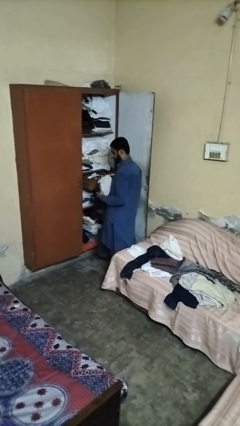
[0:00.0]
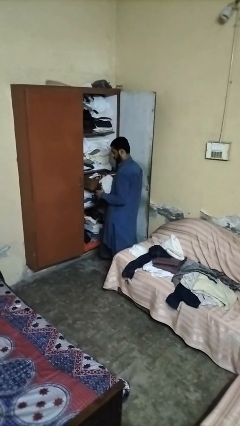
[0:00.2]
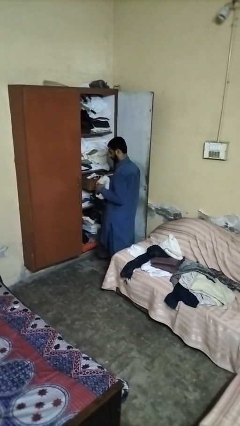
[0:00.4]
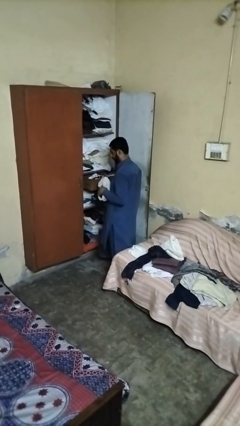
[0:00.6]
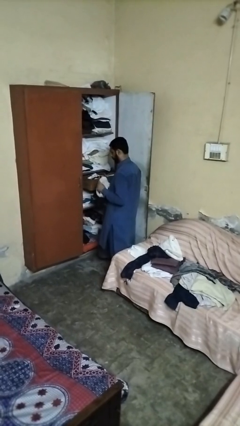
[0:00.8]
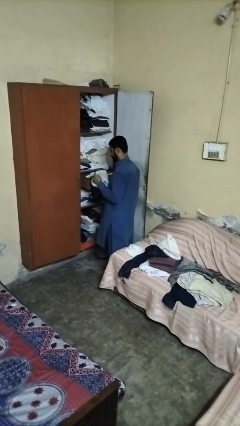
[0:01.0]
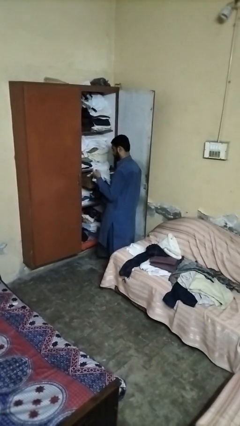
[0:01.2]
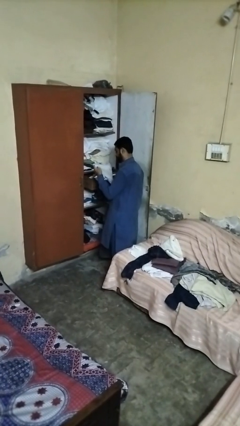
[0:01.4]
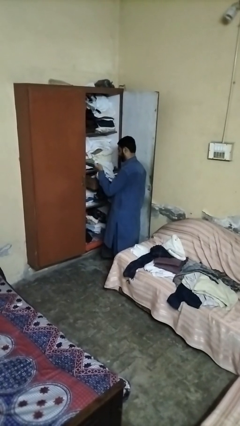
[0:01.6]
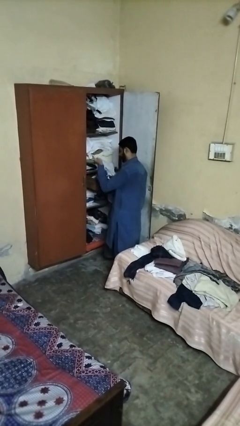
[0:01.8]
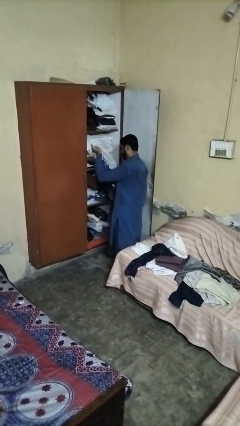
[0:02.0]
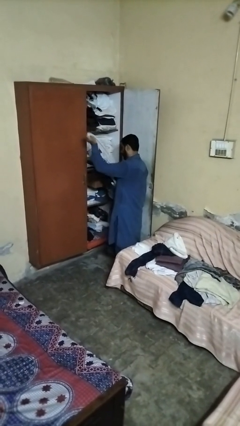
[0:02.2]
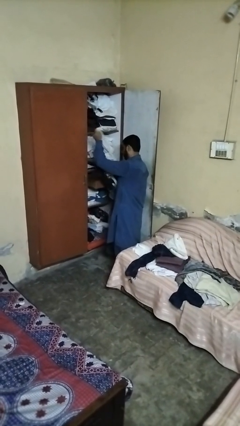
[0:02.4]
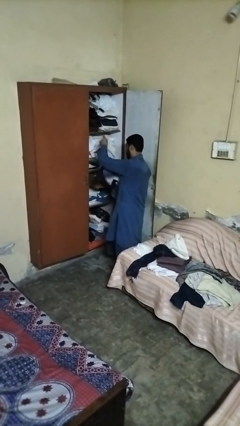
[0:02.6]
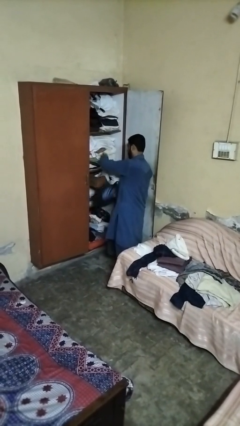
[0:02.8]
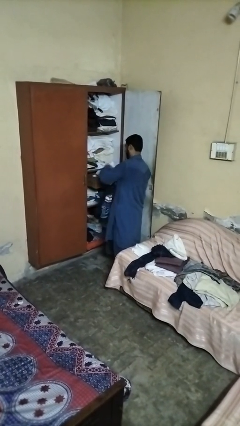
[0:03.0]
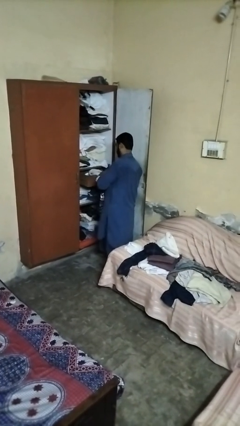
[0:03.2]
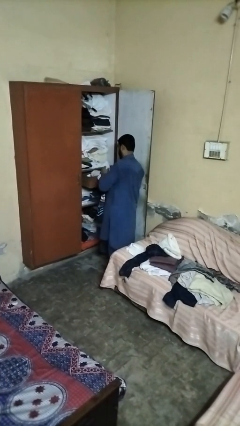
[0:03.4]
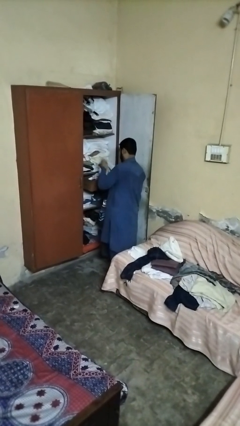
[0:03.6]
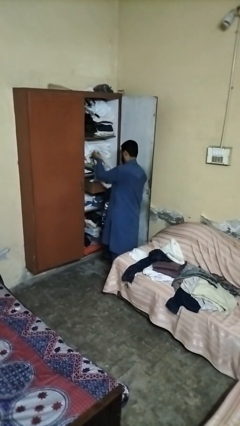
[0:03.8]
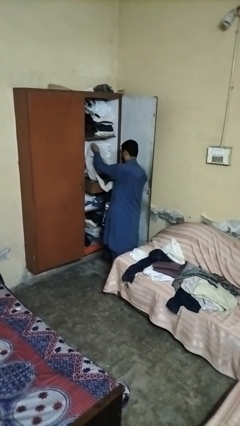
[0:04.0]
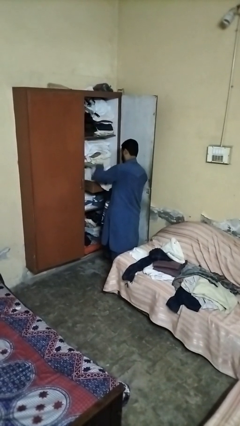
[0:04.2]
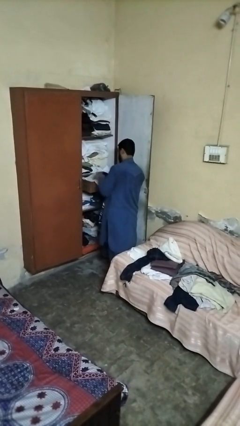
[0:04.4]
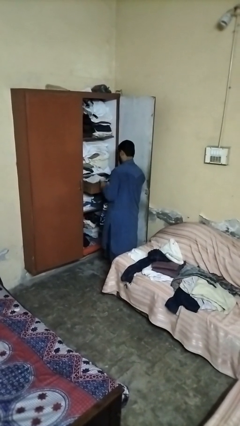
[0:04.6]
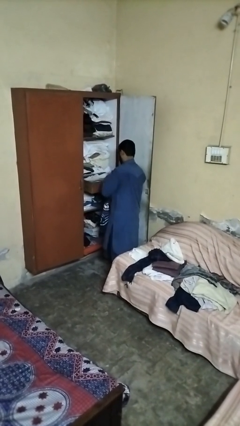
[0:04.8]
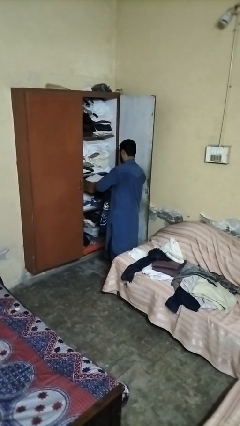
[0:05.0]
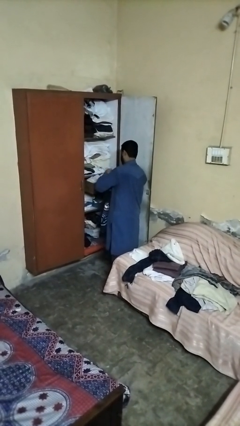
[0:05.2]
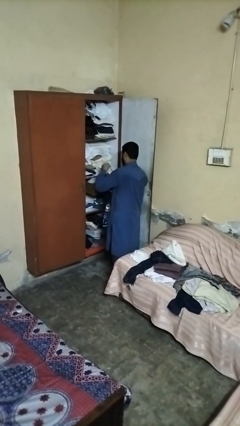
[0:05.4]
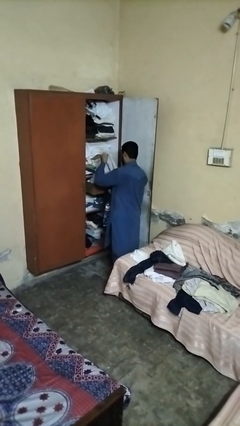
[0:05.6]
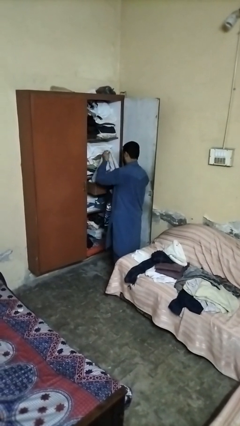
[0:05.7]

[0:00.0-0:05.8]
person puts clothes into dresser

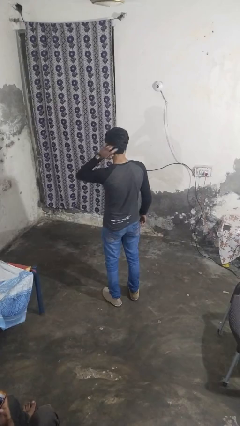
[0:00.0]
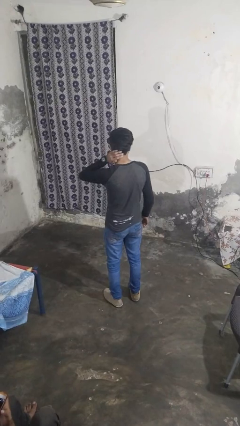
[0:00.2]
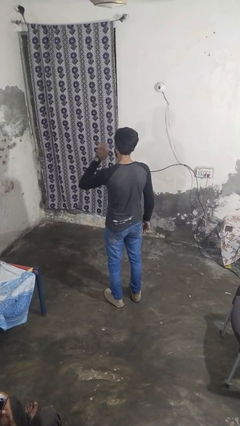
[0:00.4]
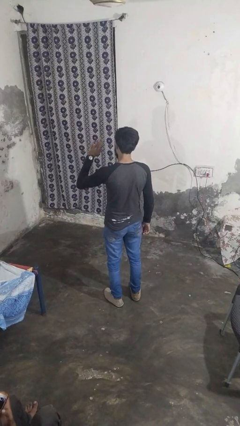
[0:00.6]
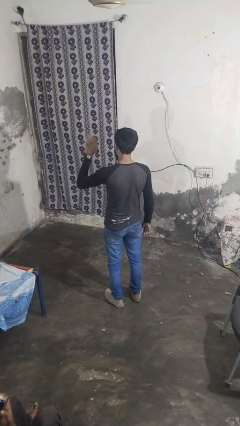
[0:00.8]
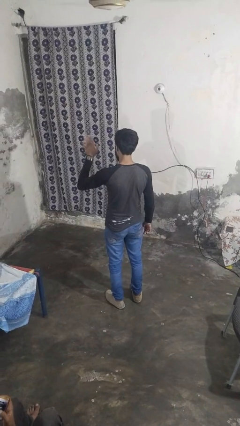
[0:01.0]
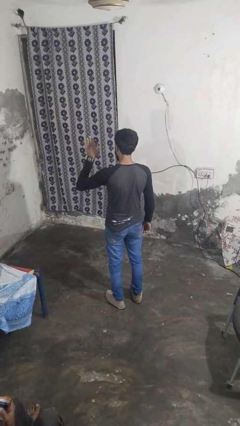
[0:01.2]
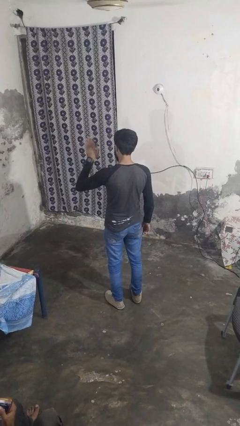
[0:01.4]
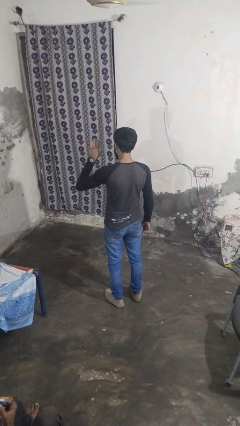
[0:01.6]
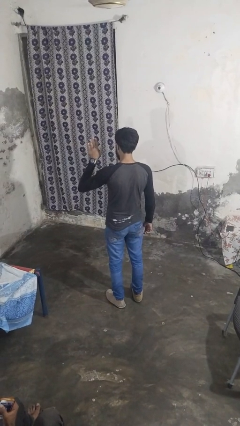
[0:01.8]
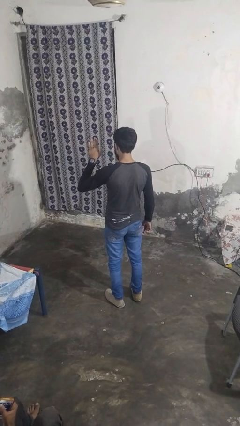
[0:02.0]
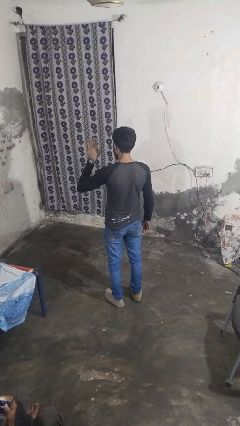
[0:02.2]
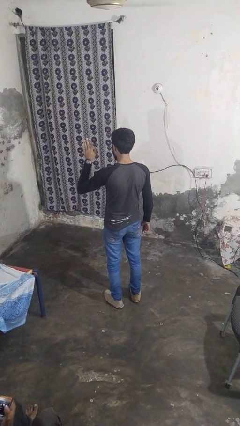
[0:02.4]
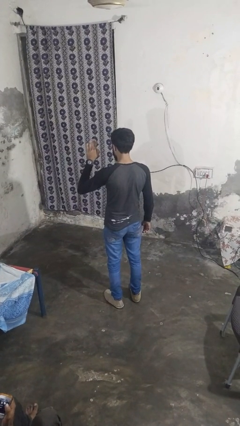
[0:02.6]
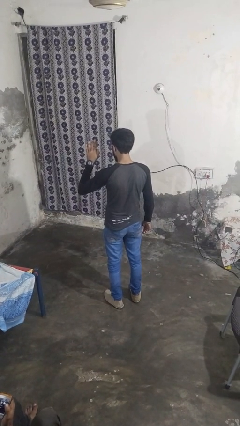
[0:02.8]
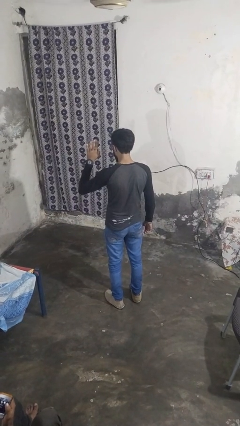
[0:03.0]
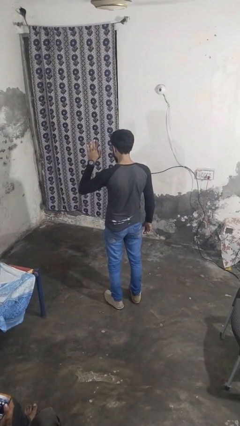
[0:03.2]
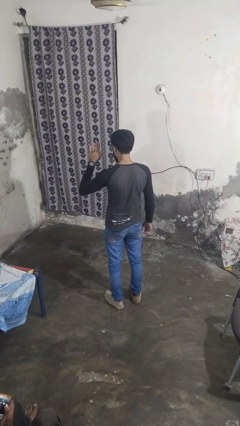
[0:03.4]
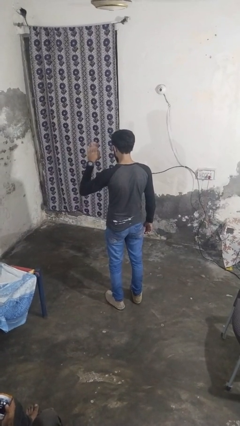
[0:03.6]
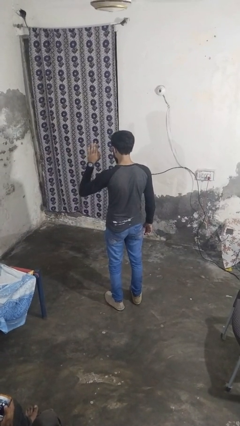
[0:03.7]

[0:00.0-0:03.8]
person waves at person

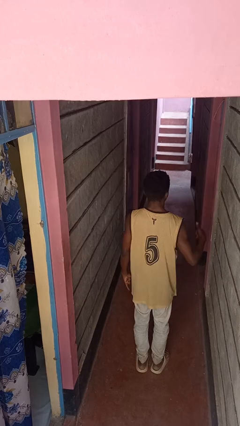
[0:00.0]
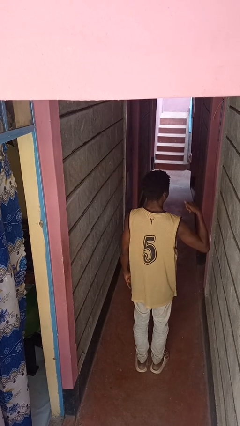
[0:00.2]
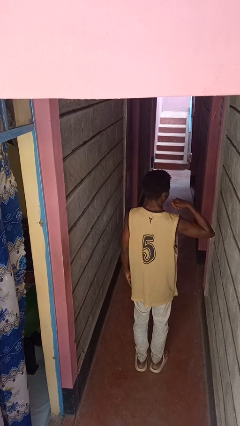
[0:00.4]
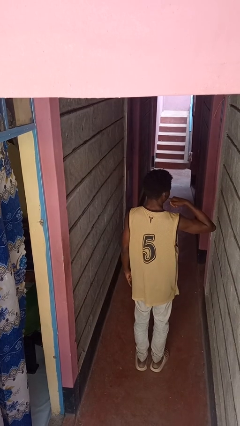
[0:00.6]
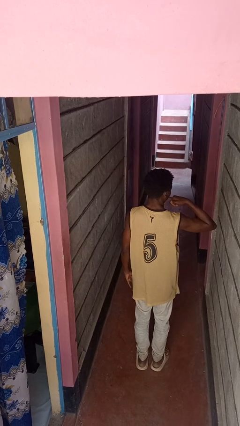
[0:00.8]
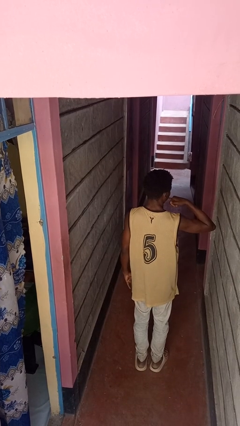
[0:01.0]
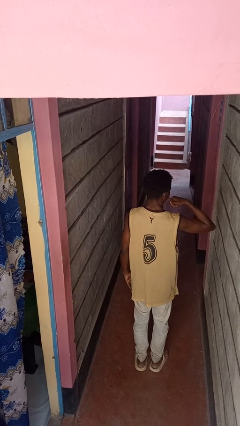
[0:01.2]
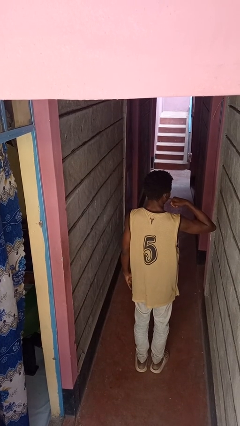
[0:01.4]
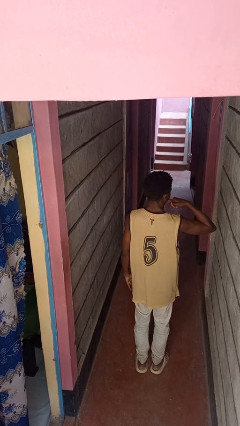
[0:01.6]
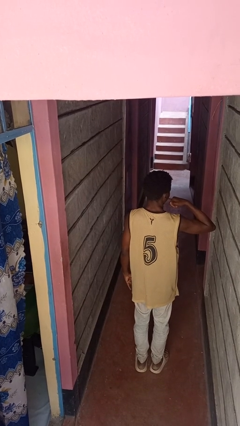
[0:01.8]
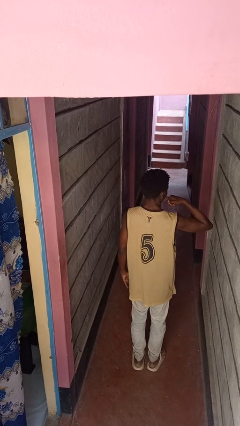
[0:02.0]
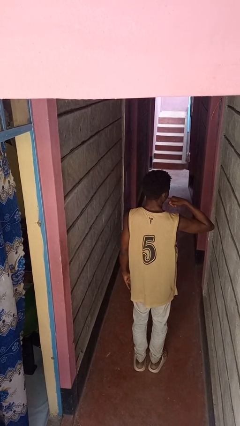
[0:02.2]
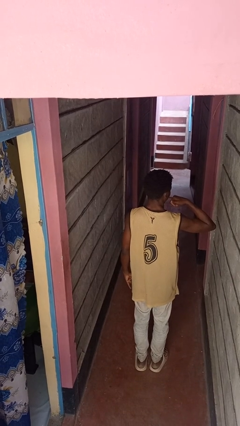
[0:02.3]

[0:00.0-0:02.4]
person gestures call me

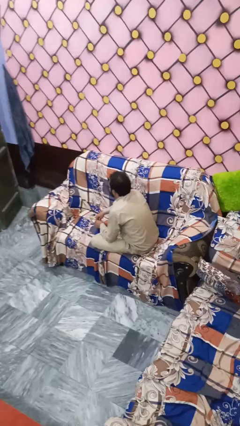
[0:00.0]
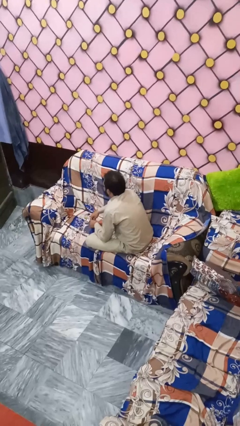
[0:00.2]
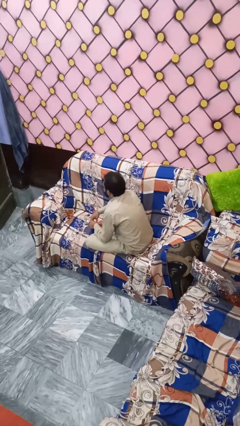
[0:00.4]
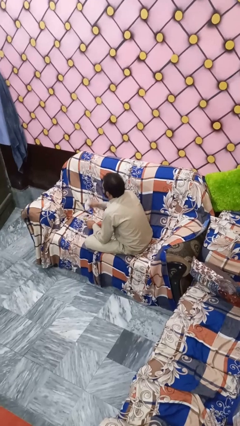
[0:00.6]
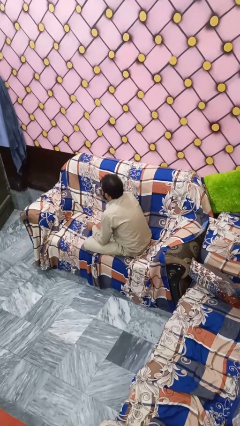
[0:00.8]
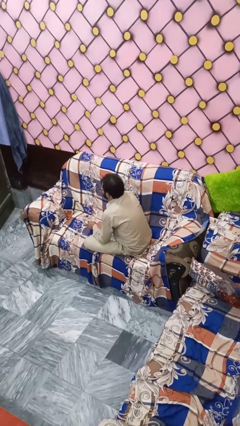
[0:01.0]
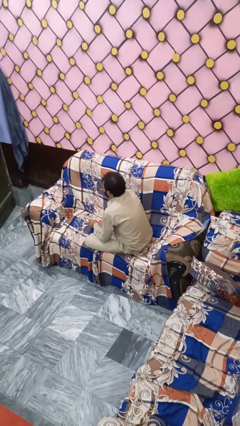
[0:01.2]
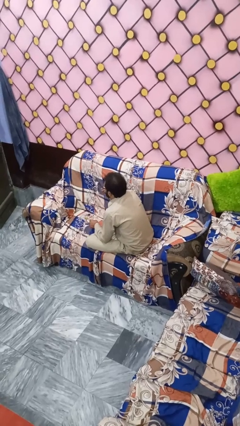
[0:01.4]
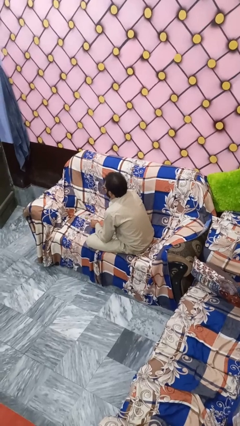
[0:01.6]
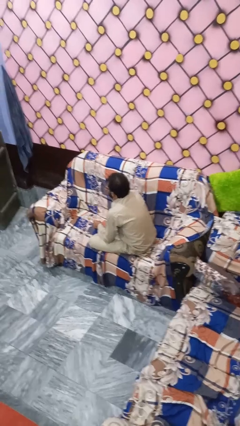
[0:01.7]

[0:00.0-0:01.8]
person blows nose

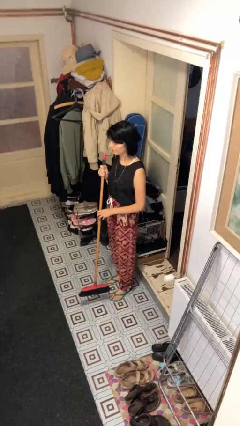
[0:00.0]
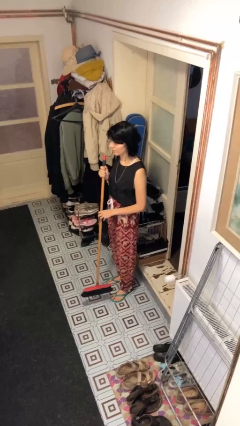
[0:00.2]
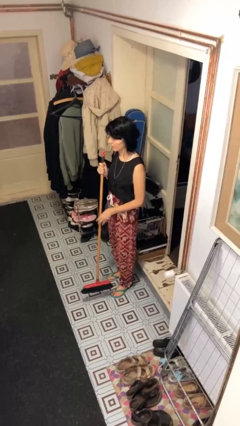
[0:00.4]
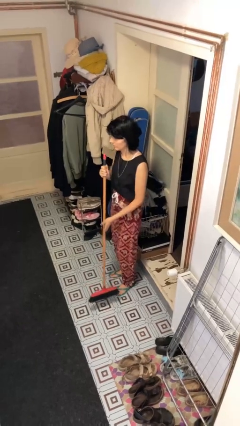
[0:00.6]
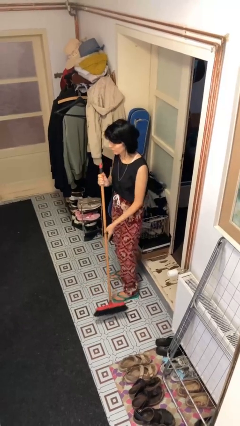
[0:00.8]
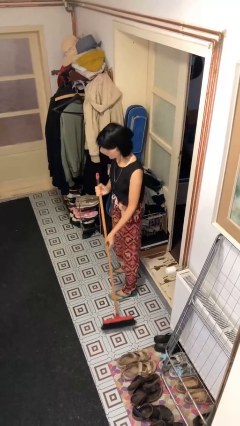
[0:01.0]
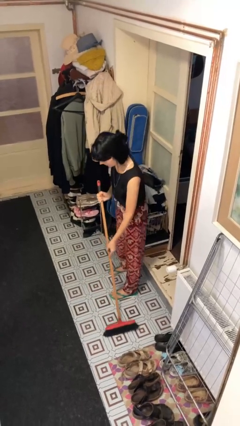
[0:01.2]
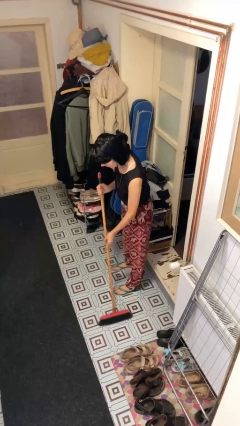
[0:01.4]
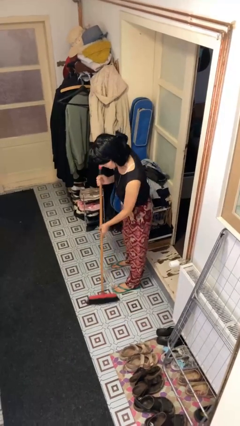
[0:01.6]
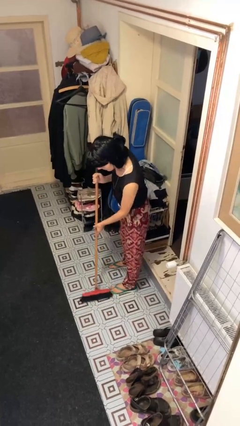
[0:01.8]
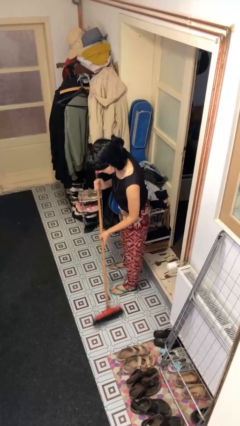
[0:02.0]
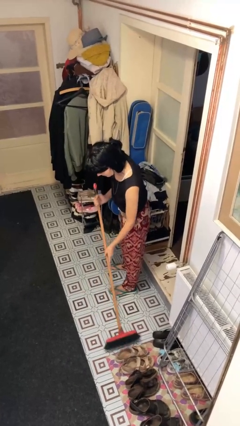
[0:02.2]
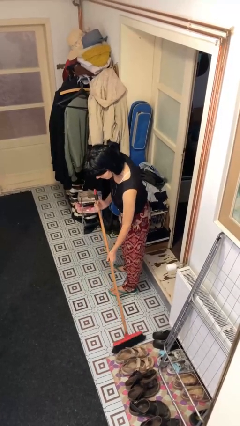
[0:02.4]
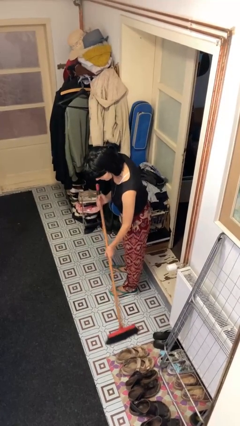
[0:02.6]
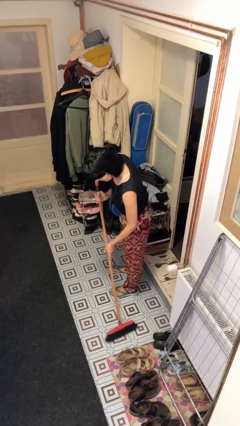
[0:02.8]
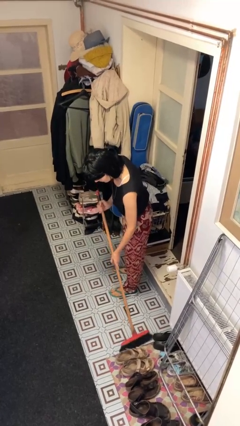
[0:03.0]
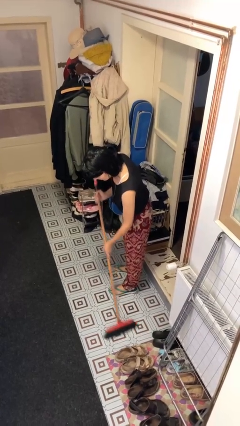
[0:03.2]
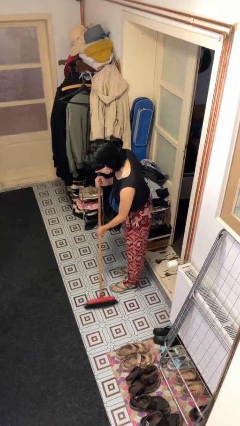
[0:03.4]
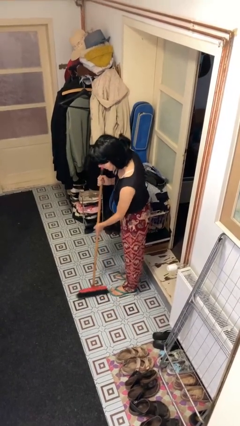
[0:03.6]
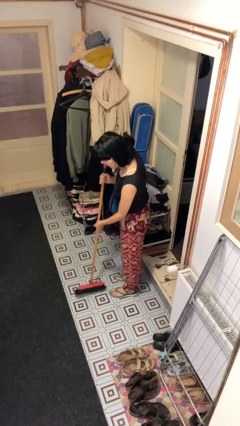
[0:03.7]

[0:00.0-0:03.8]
person sweeps floor
